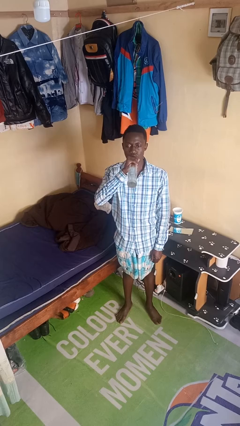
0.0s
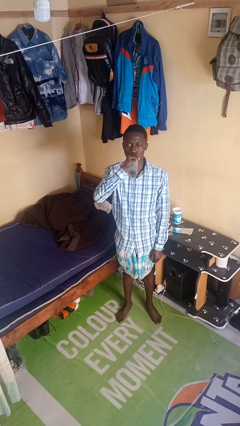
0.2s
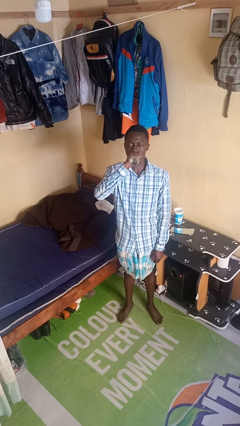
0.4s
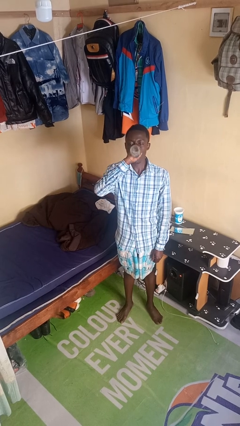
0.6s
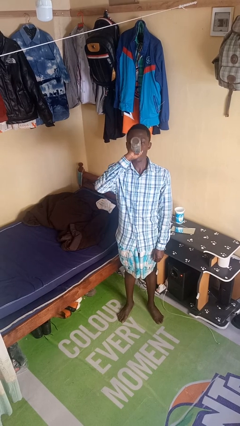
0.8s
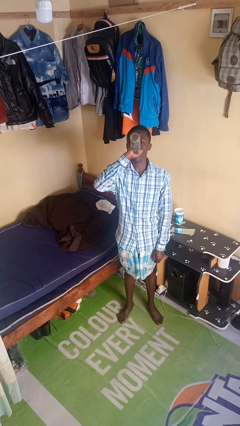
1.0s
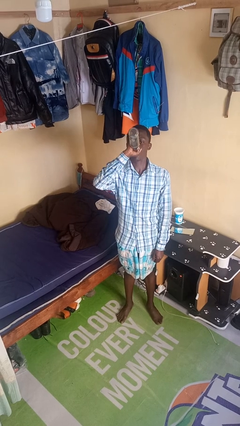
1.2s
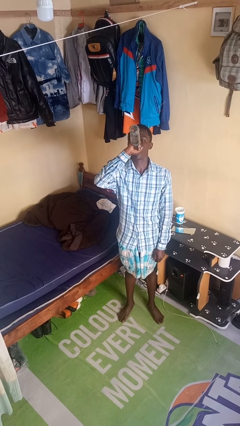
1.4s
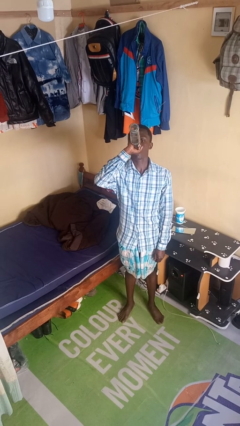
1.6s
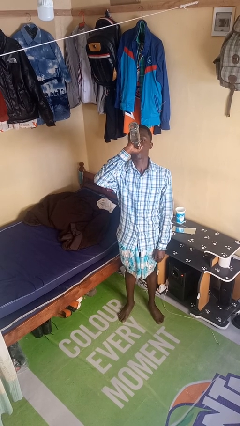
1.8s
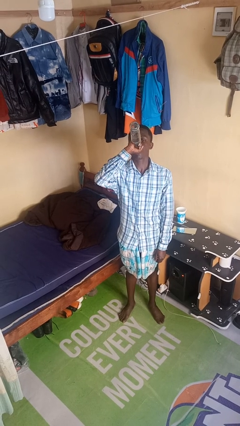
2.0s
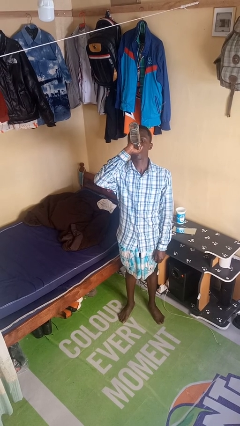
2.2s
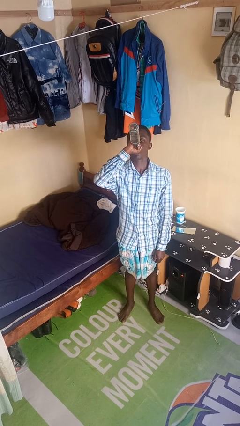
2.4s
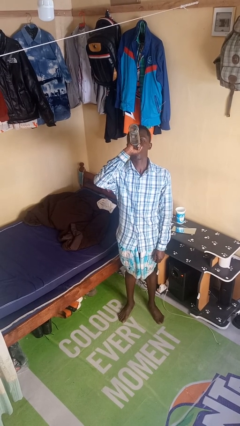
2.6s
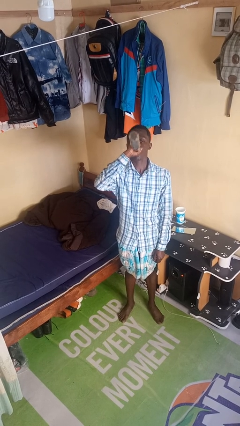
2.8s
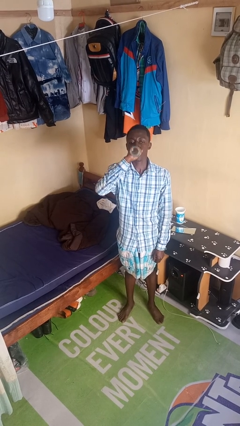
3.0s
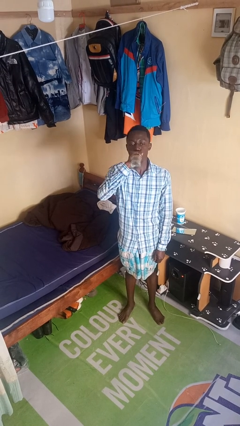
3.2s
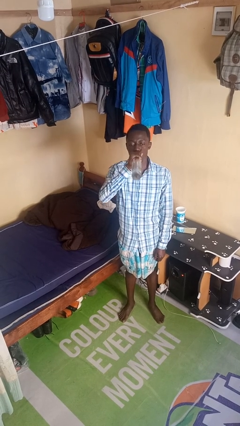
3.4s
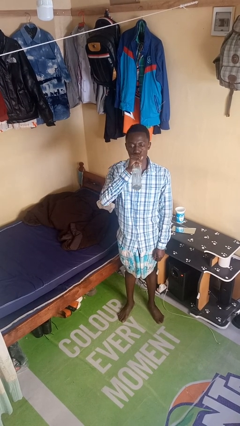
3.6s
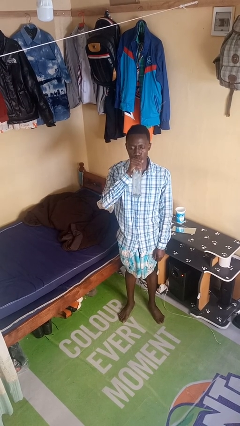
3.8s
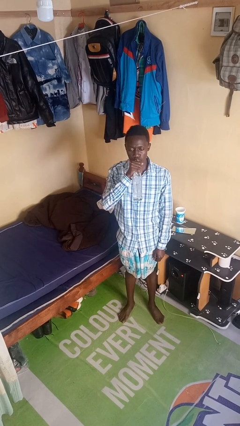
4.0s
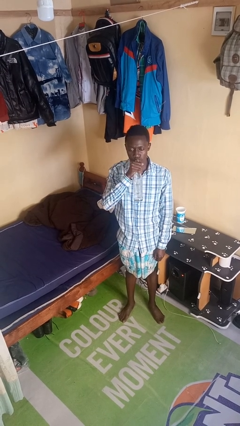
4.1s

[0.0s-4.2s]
person drinks from bottle

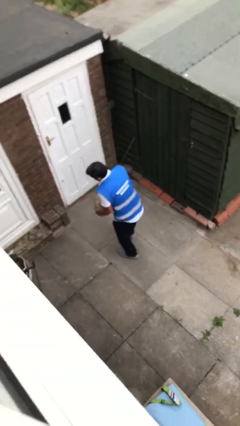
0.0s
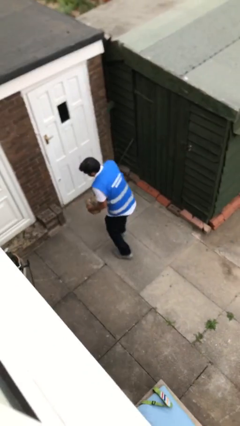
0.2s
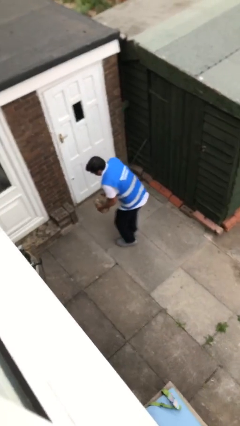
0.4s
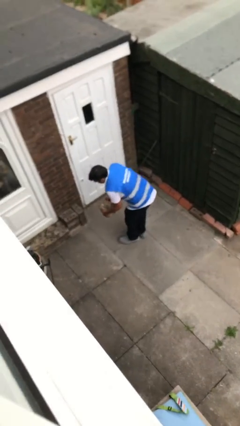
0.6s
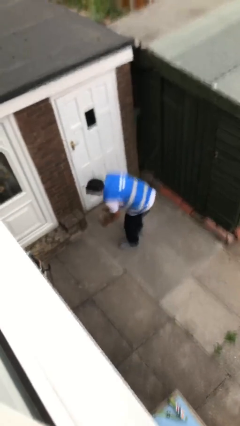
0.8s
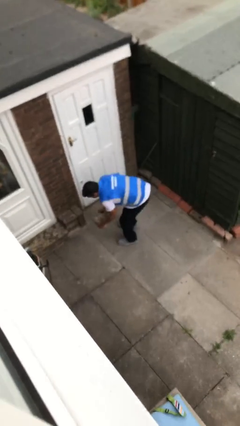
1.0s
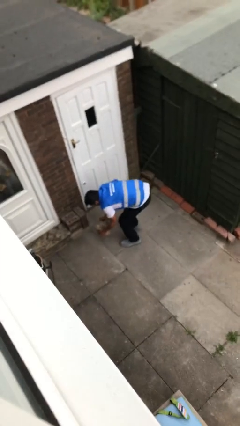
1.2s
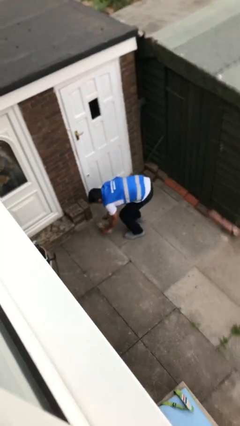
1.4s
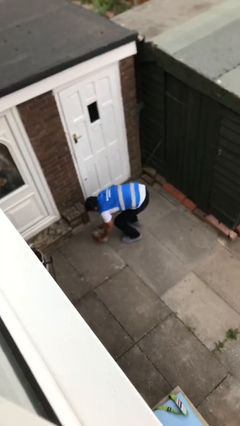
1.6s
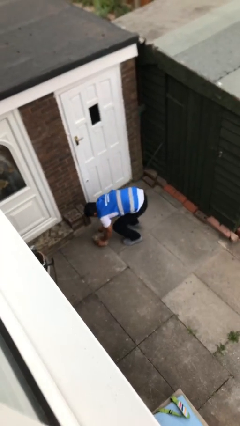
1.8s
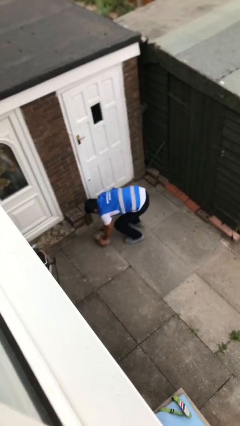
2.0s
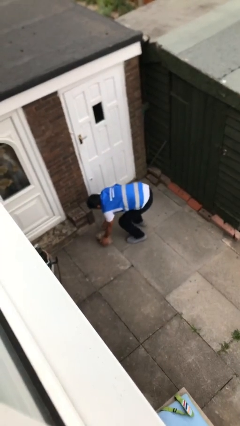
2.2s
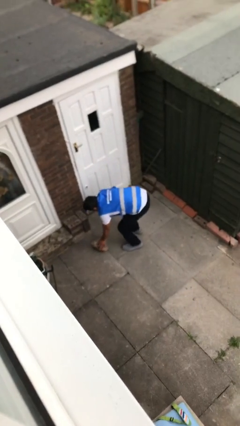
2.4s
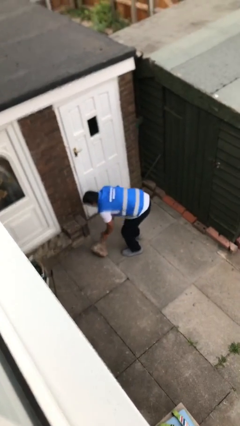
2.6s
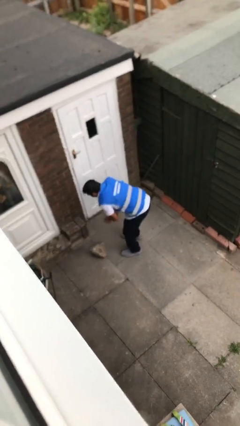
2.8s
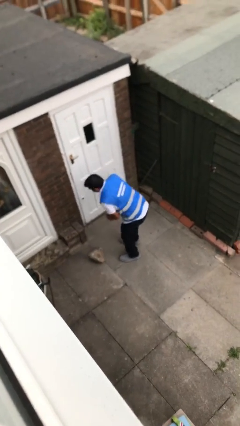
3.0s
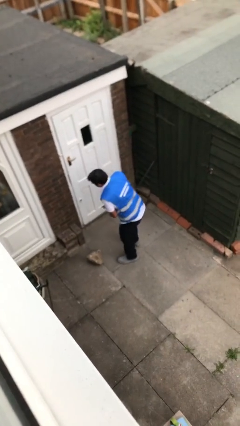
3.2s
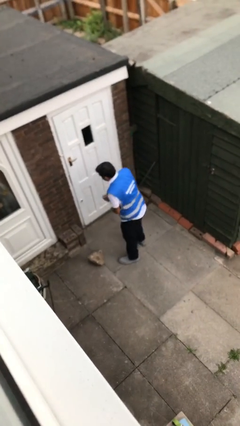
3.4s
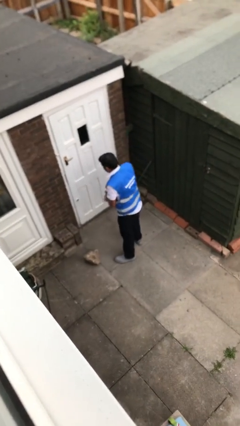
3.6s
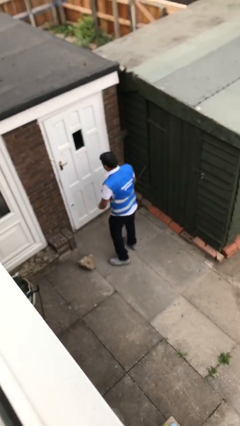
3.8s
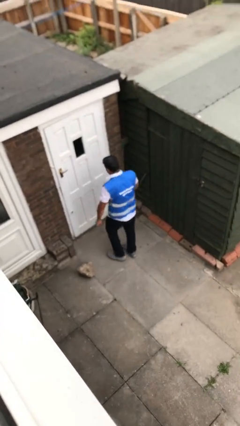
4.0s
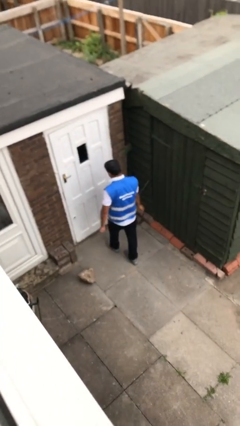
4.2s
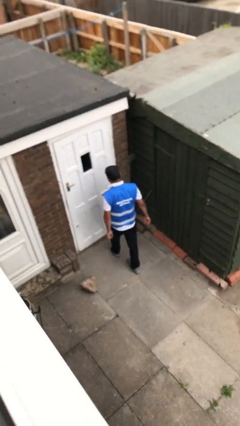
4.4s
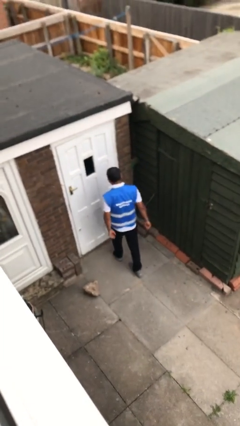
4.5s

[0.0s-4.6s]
person puts down object on floor

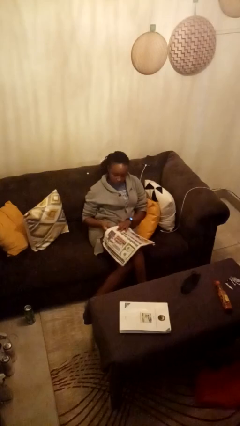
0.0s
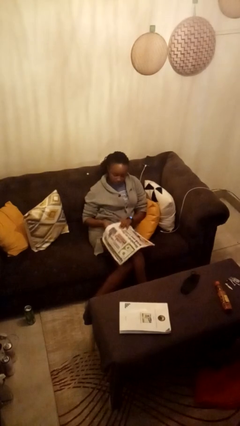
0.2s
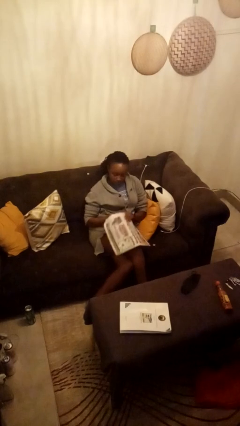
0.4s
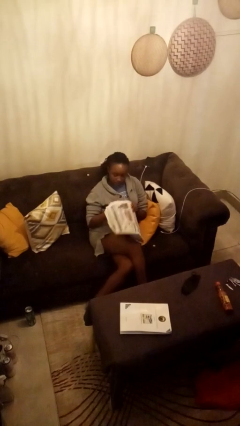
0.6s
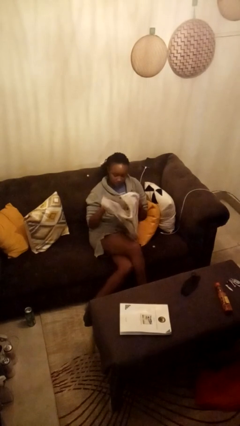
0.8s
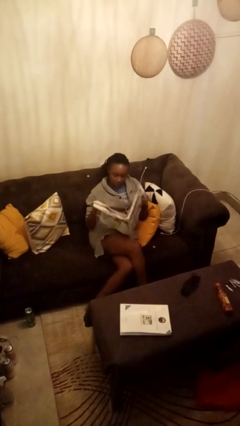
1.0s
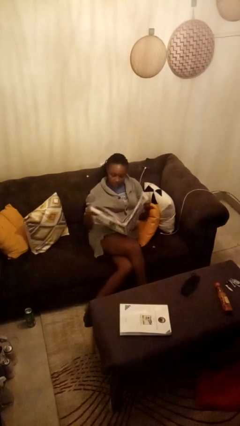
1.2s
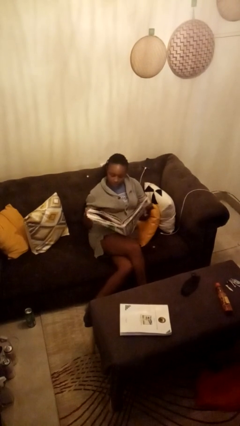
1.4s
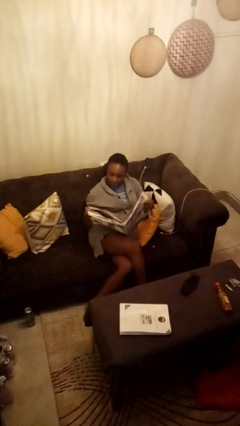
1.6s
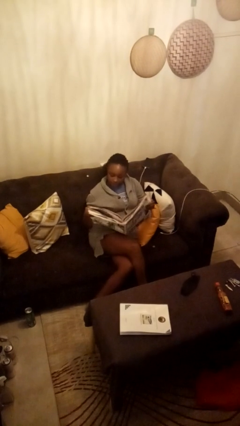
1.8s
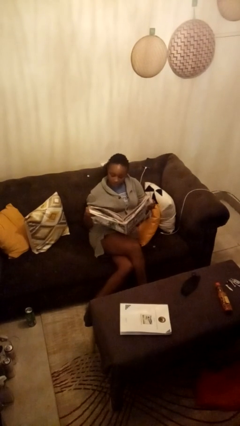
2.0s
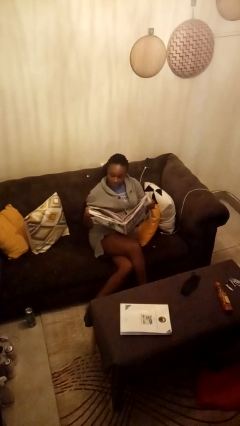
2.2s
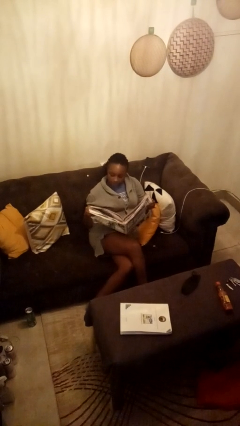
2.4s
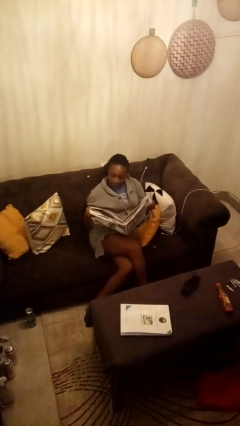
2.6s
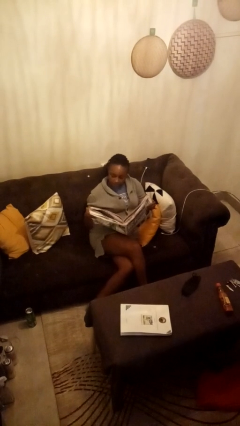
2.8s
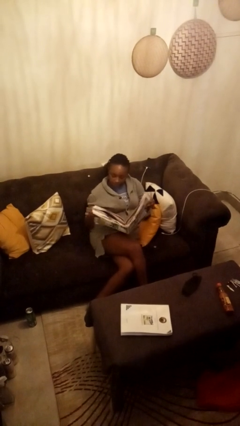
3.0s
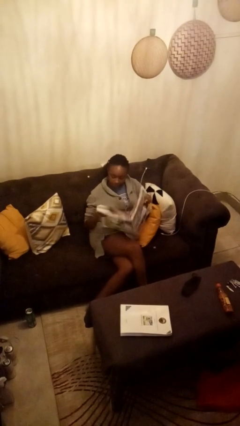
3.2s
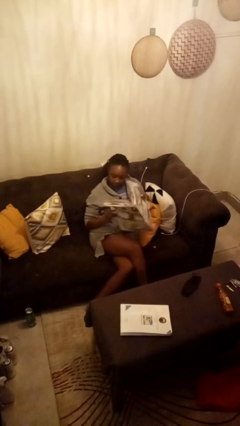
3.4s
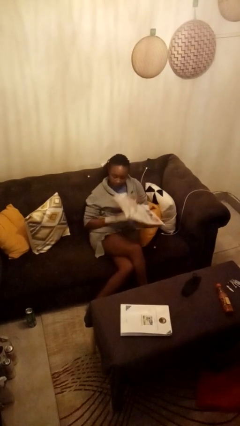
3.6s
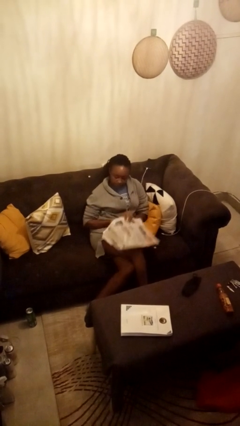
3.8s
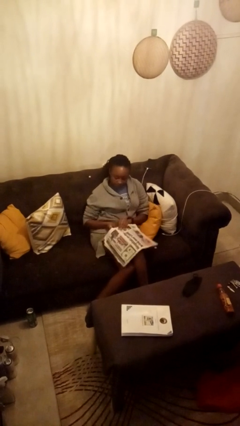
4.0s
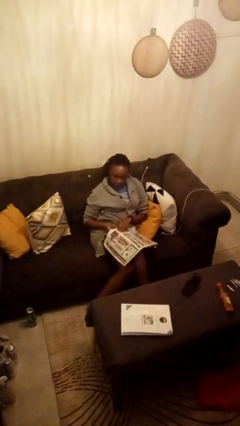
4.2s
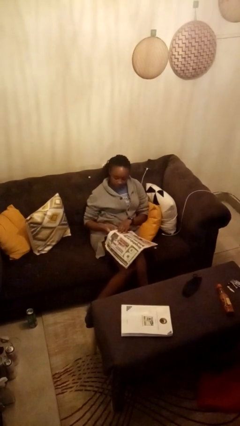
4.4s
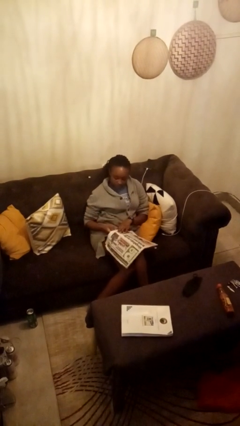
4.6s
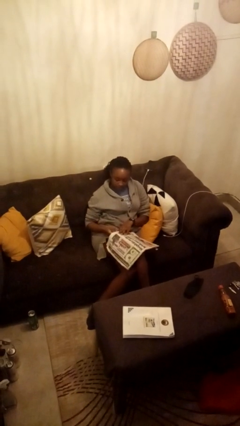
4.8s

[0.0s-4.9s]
person reads newspaper

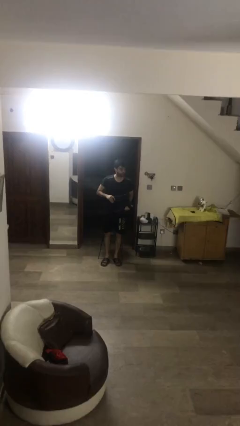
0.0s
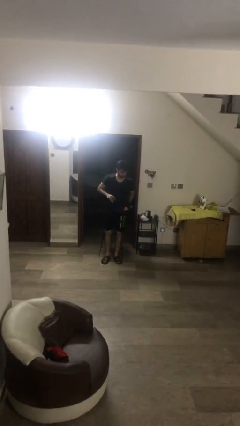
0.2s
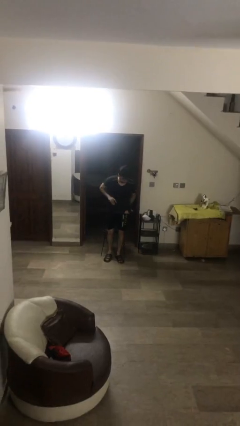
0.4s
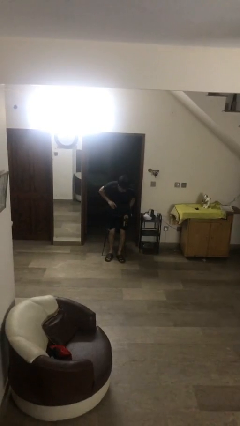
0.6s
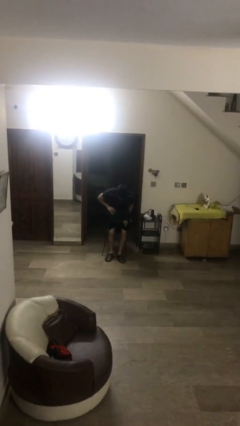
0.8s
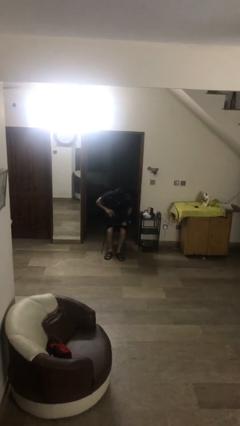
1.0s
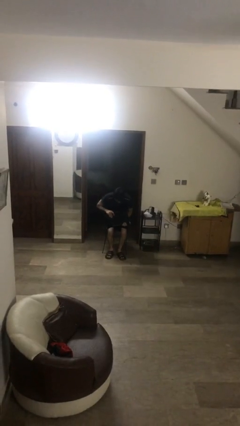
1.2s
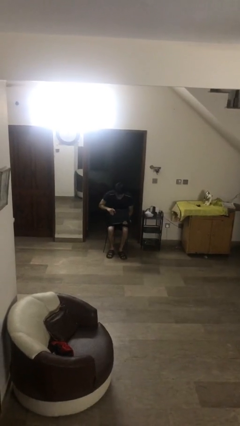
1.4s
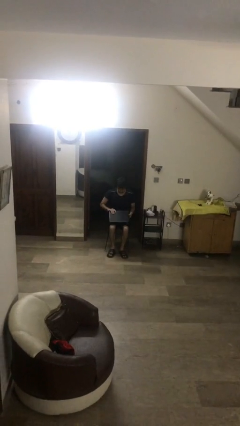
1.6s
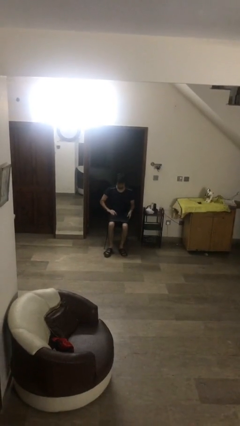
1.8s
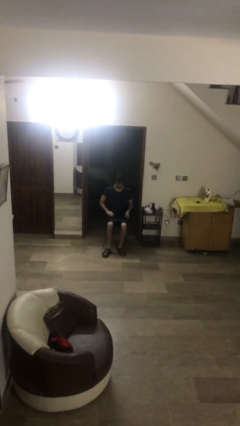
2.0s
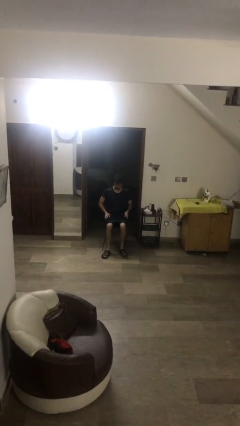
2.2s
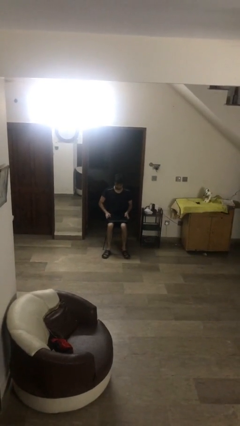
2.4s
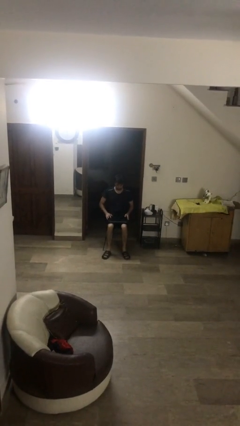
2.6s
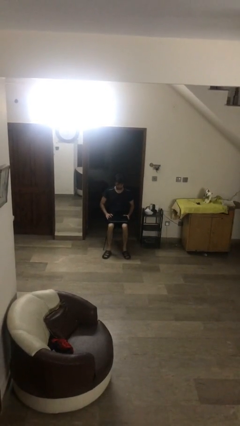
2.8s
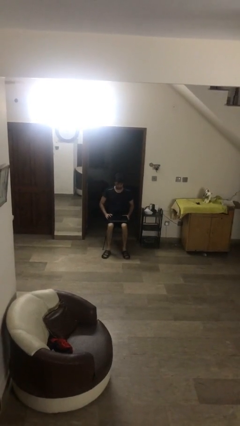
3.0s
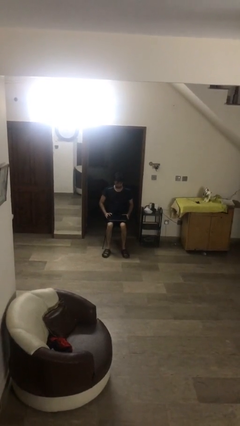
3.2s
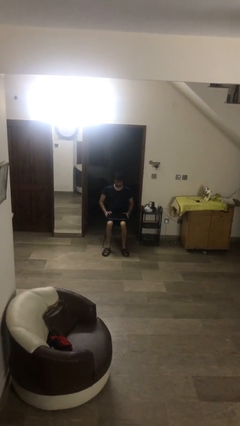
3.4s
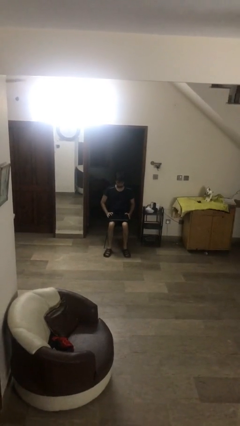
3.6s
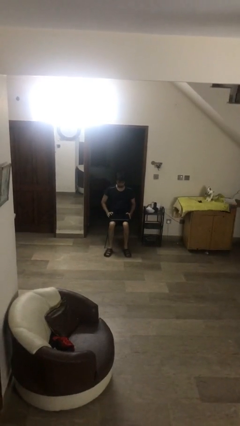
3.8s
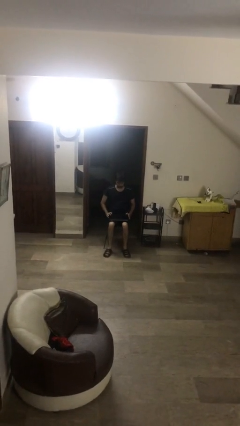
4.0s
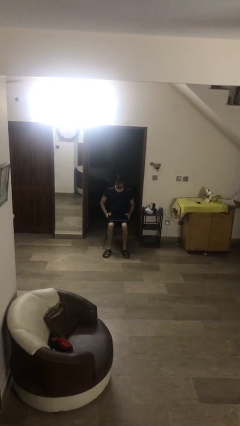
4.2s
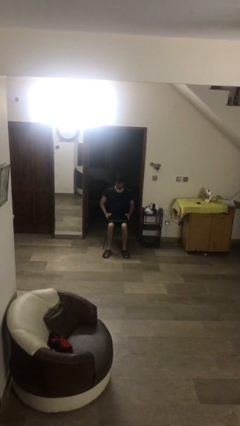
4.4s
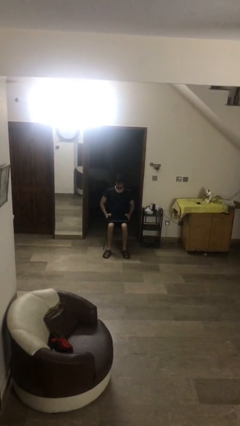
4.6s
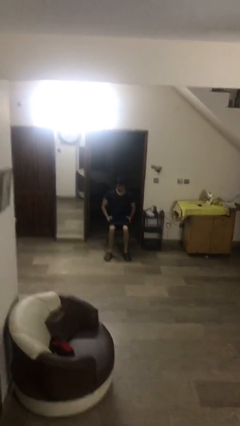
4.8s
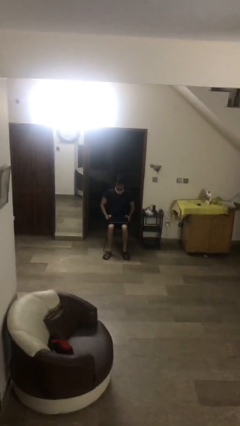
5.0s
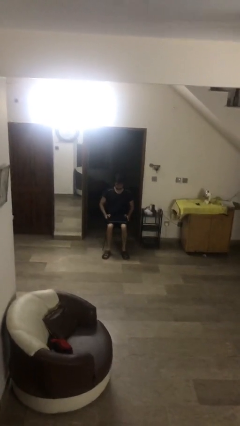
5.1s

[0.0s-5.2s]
person sits down
